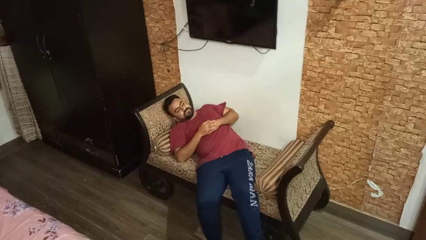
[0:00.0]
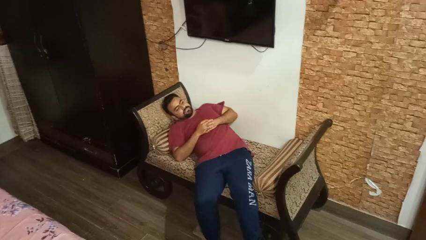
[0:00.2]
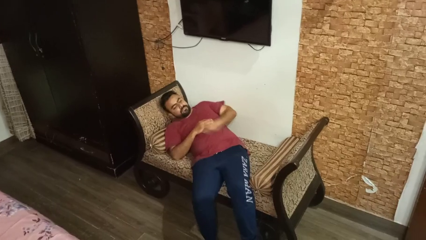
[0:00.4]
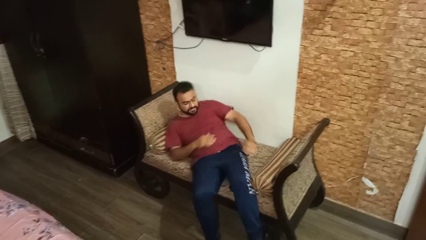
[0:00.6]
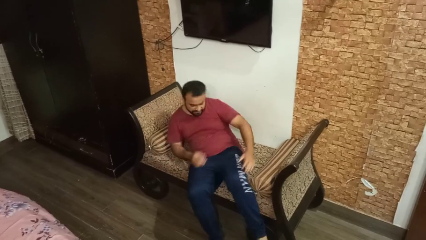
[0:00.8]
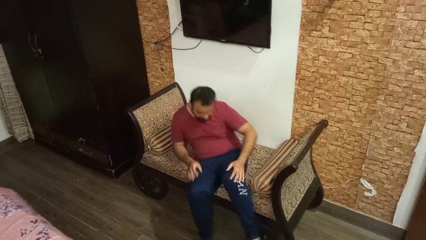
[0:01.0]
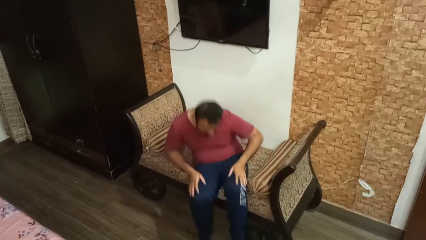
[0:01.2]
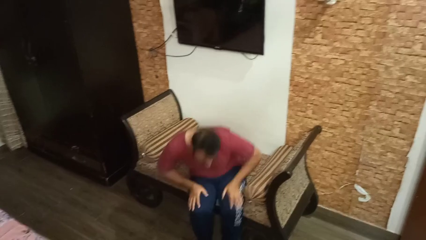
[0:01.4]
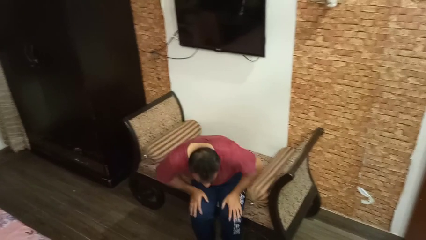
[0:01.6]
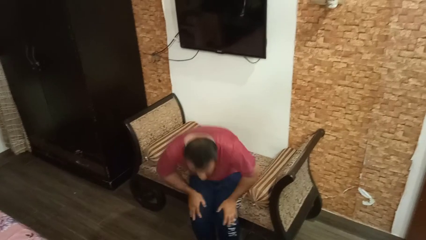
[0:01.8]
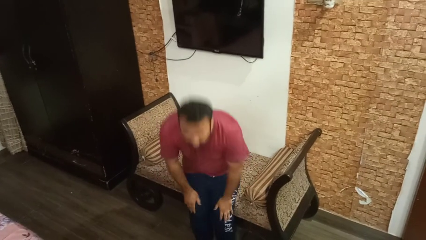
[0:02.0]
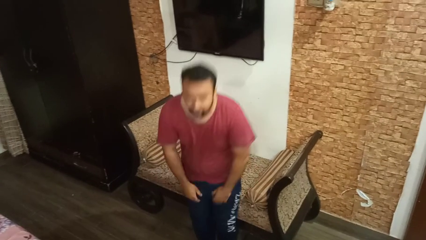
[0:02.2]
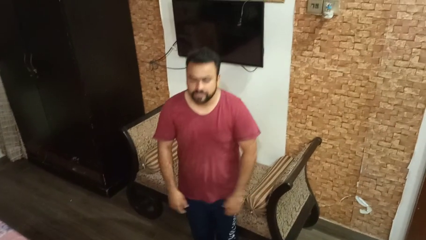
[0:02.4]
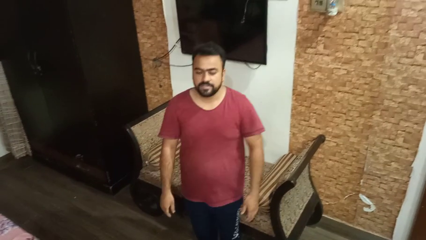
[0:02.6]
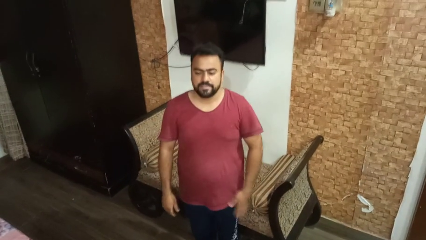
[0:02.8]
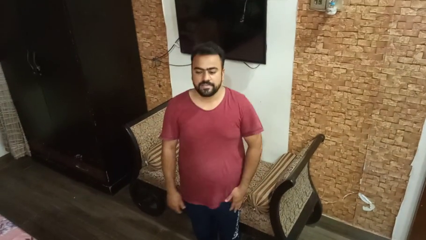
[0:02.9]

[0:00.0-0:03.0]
person stands up

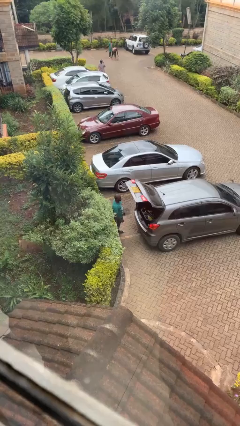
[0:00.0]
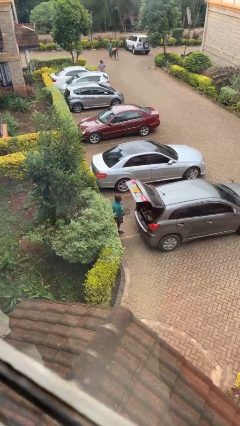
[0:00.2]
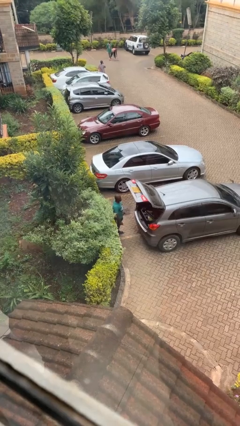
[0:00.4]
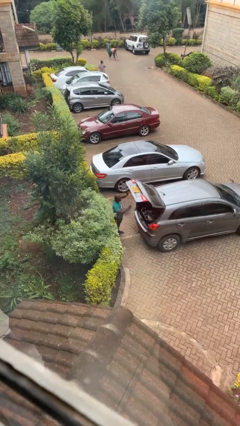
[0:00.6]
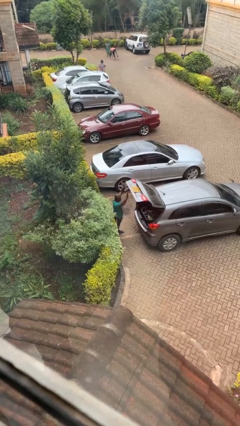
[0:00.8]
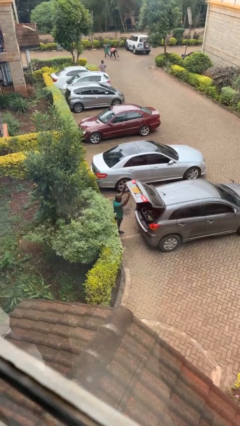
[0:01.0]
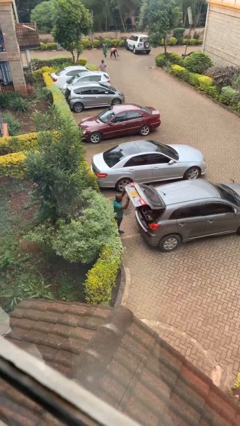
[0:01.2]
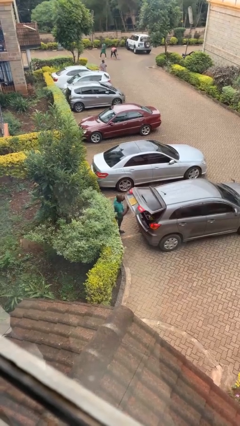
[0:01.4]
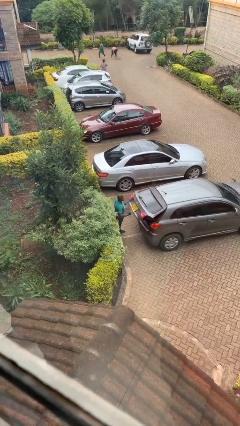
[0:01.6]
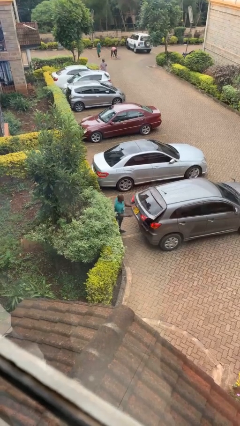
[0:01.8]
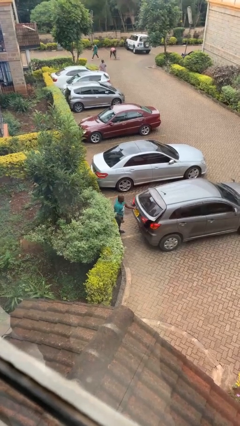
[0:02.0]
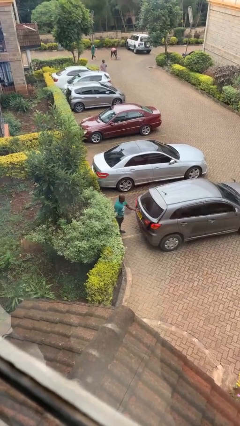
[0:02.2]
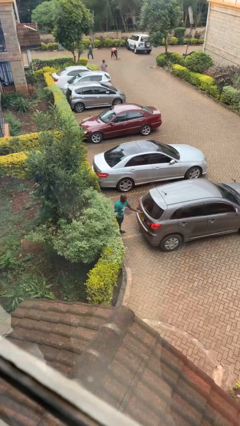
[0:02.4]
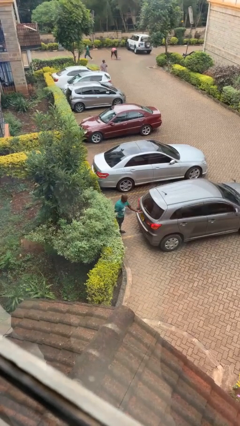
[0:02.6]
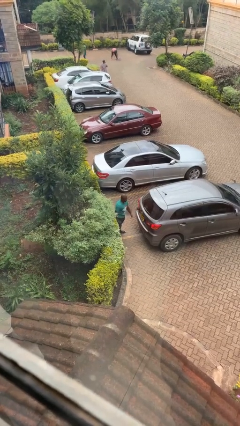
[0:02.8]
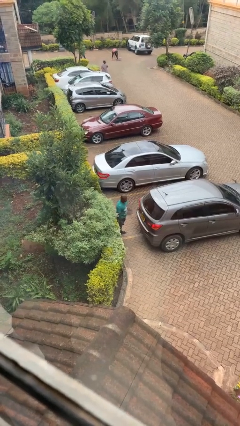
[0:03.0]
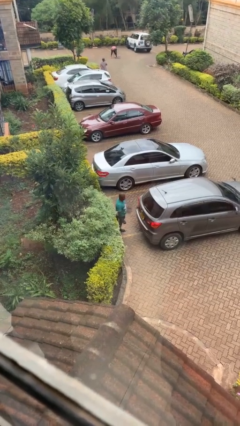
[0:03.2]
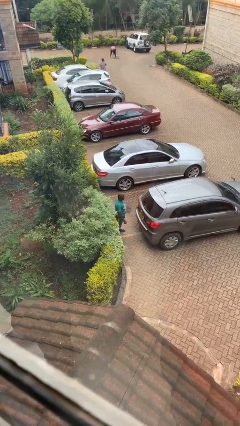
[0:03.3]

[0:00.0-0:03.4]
person closes car trunk

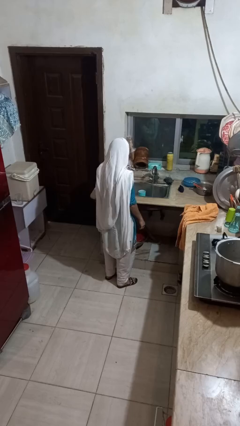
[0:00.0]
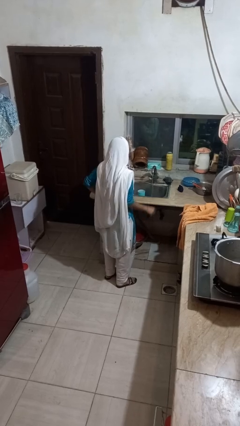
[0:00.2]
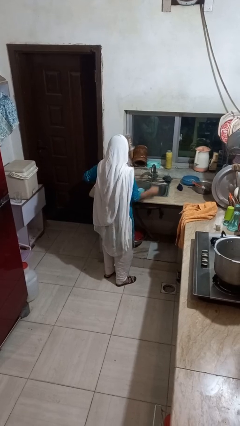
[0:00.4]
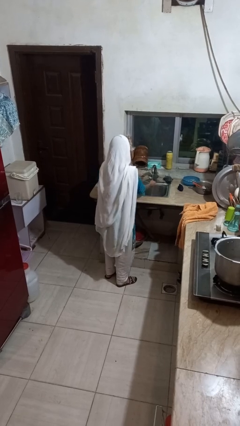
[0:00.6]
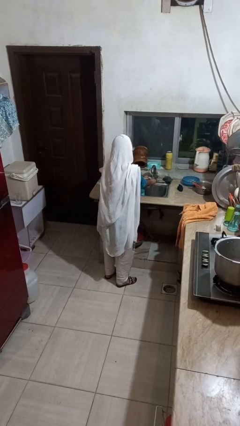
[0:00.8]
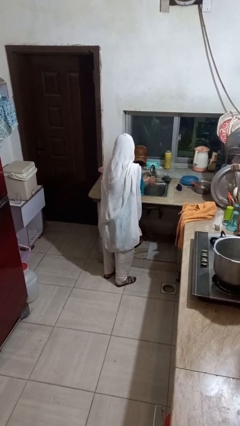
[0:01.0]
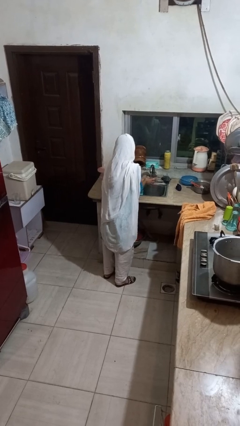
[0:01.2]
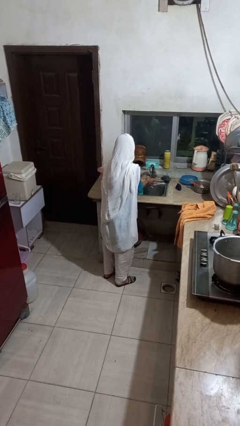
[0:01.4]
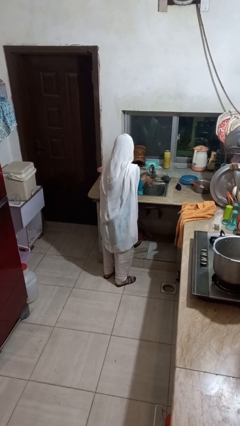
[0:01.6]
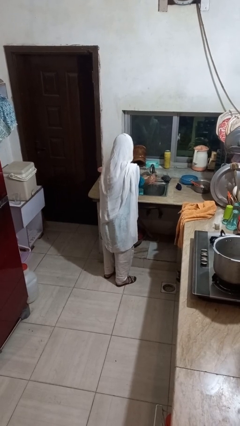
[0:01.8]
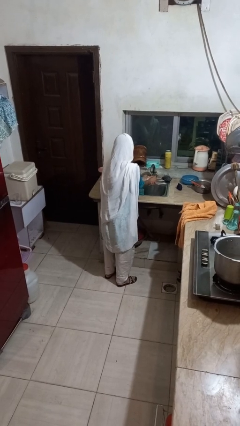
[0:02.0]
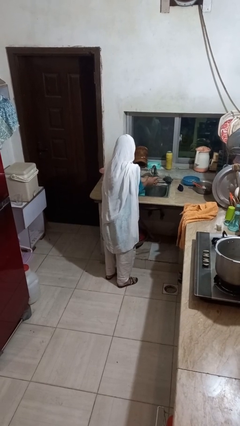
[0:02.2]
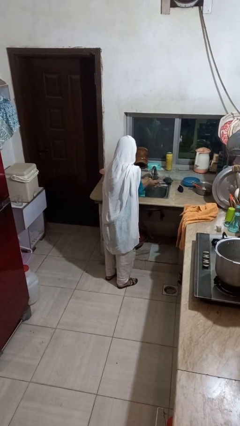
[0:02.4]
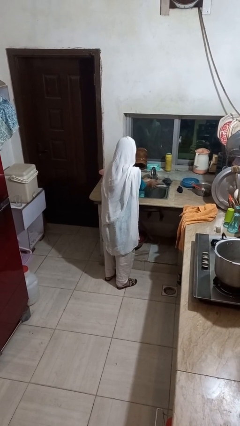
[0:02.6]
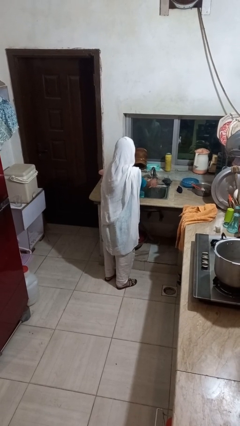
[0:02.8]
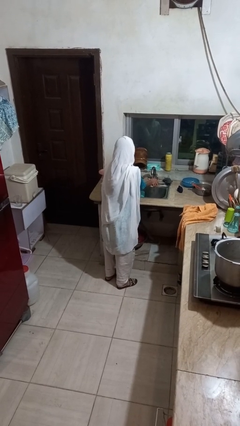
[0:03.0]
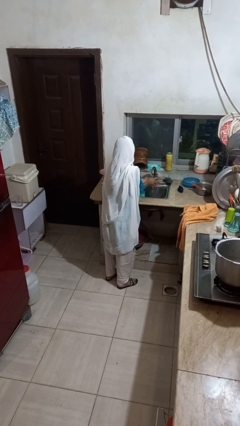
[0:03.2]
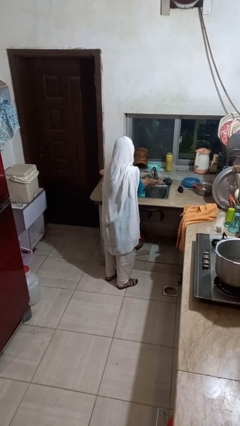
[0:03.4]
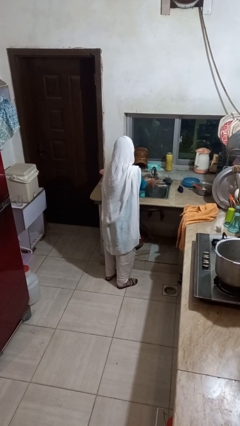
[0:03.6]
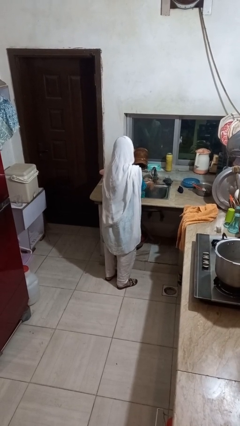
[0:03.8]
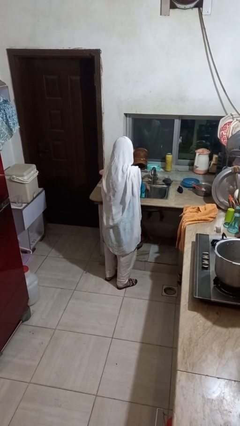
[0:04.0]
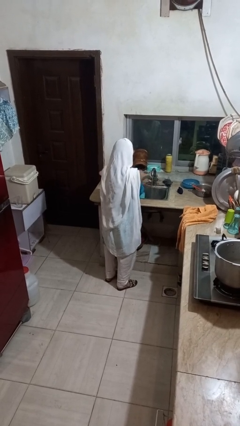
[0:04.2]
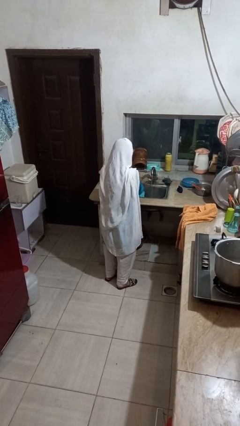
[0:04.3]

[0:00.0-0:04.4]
person washes hands

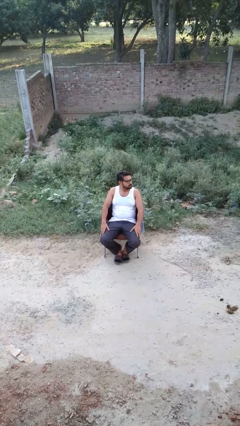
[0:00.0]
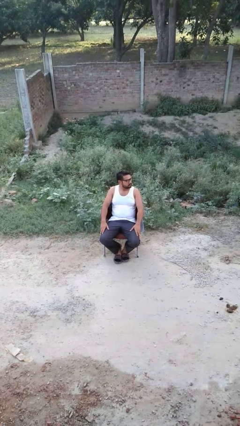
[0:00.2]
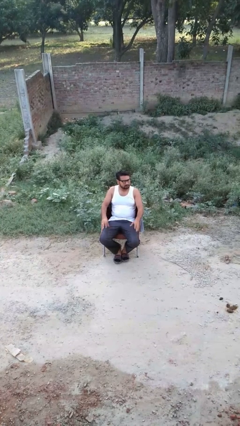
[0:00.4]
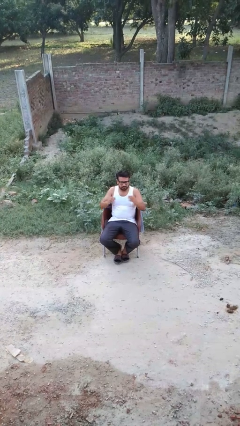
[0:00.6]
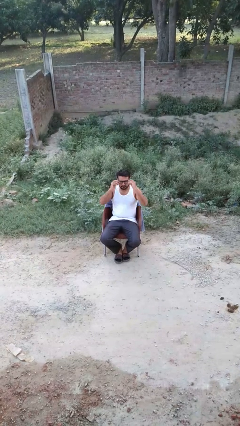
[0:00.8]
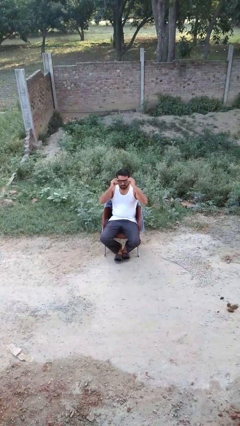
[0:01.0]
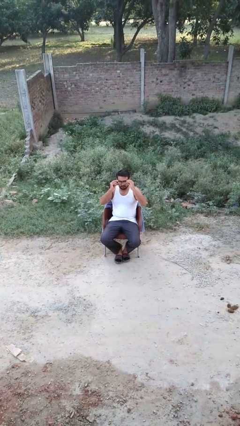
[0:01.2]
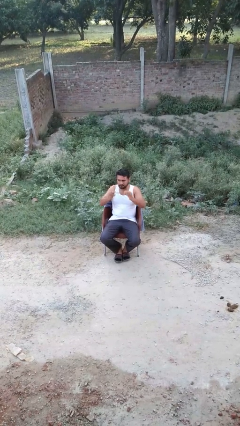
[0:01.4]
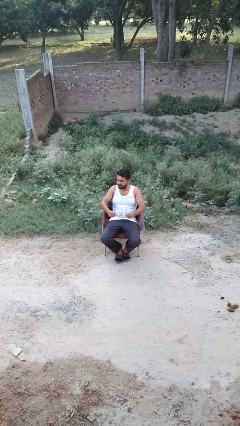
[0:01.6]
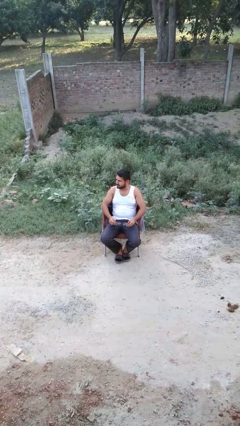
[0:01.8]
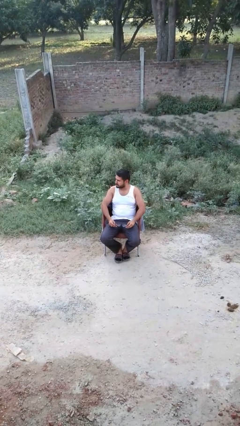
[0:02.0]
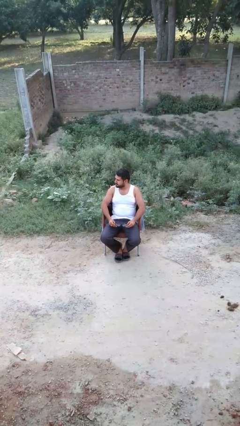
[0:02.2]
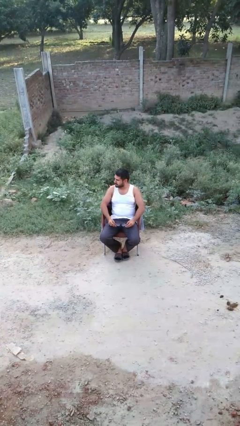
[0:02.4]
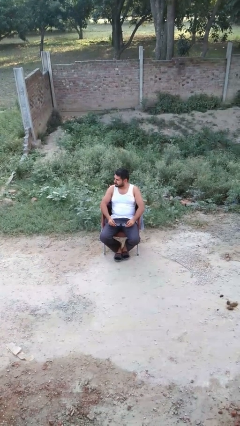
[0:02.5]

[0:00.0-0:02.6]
person takes off glasses

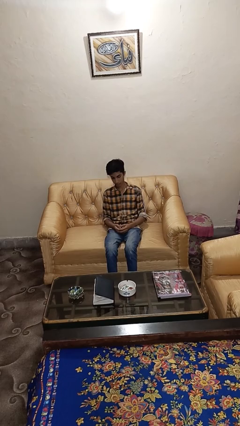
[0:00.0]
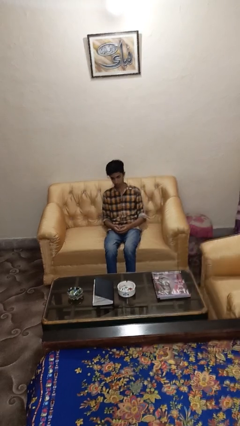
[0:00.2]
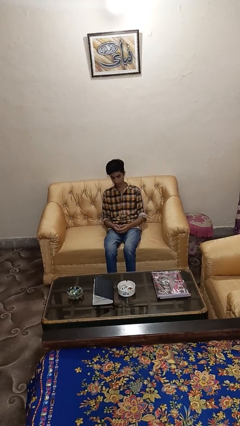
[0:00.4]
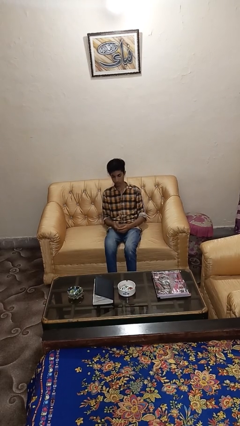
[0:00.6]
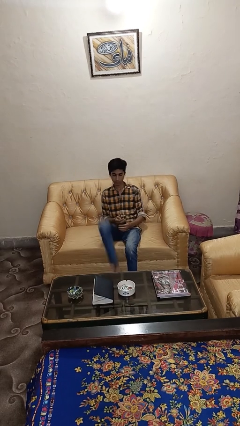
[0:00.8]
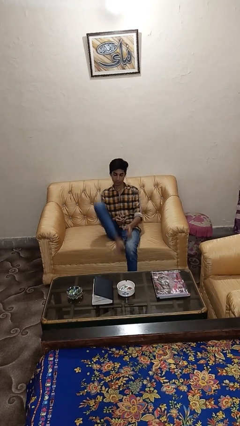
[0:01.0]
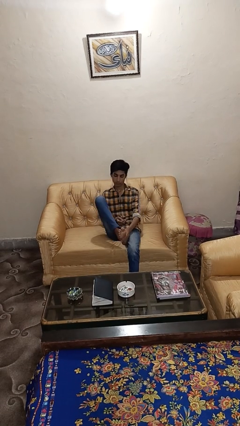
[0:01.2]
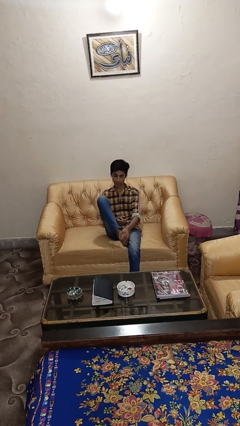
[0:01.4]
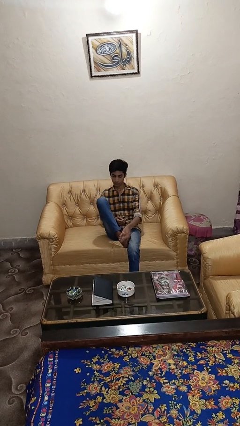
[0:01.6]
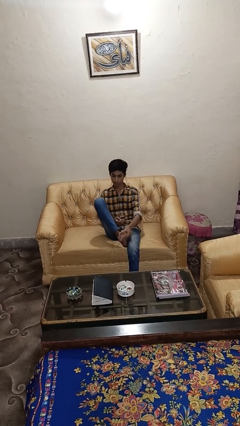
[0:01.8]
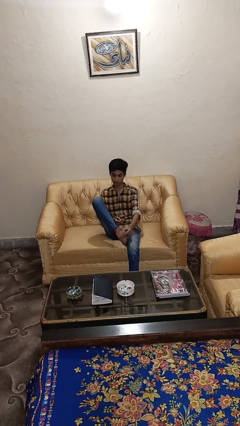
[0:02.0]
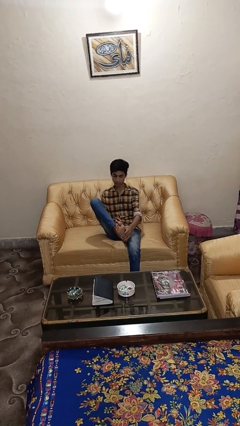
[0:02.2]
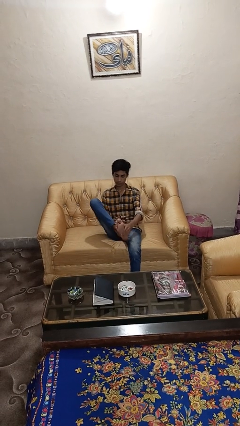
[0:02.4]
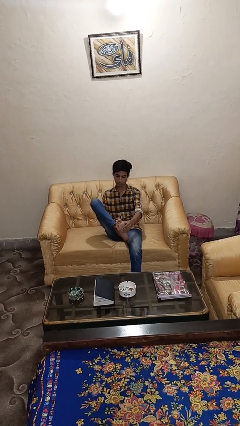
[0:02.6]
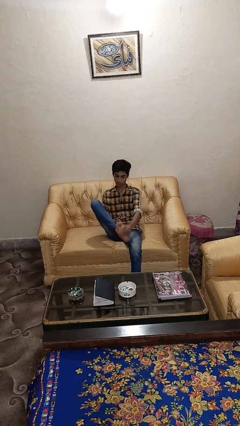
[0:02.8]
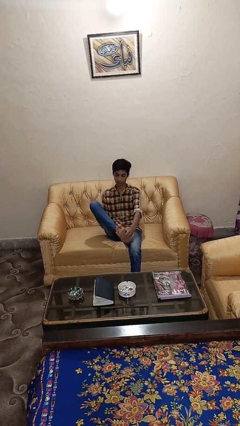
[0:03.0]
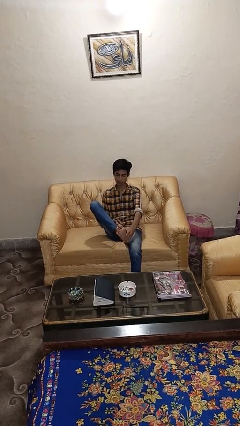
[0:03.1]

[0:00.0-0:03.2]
person rubs foot

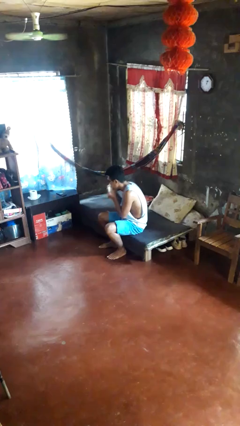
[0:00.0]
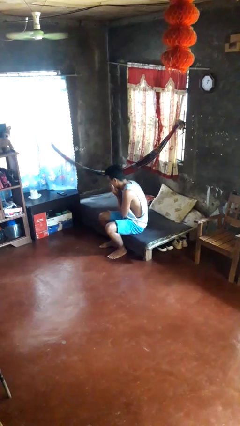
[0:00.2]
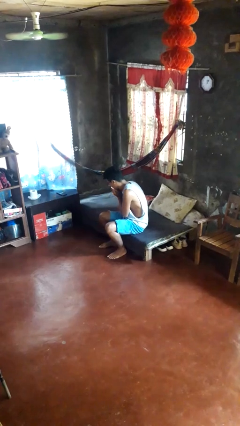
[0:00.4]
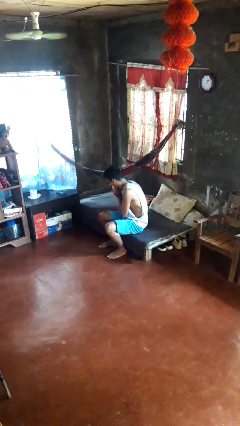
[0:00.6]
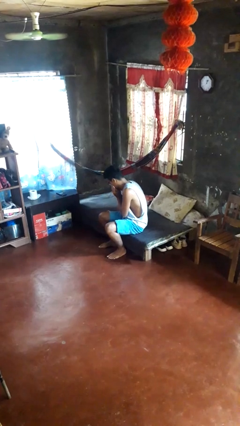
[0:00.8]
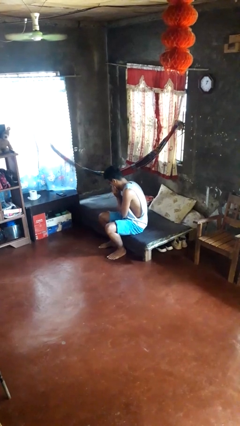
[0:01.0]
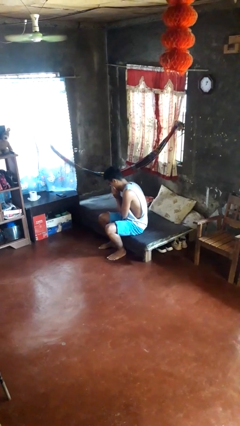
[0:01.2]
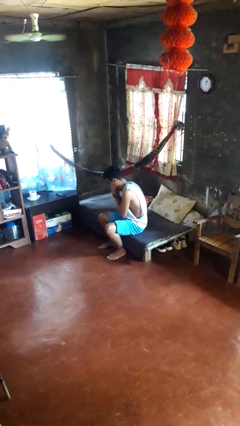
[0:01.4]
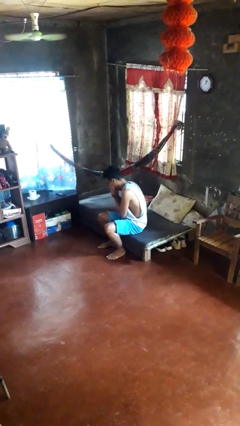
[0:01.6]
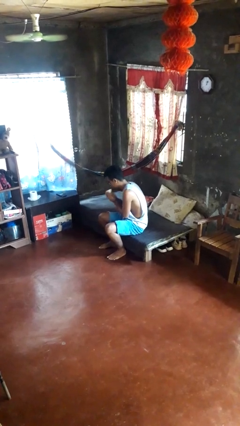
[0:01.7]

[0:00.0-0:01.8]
person blows nose
